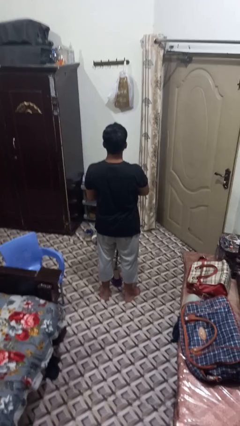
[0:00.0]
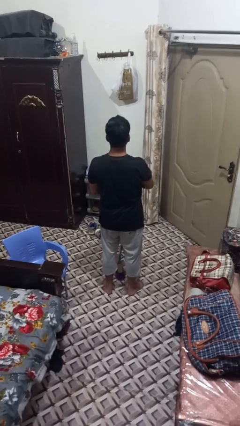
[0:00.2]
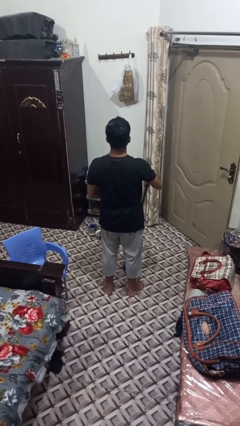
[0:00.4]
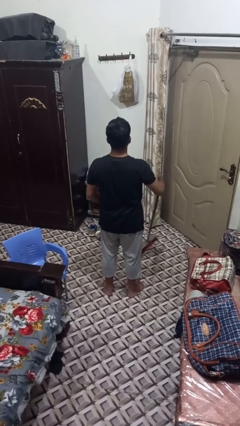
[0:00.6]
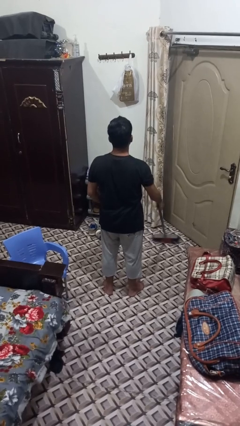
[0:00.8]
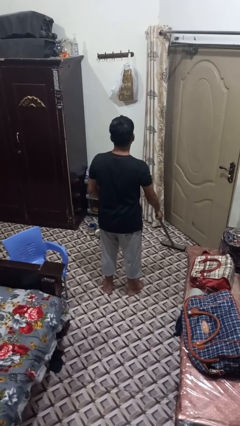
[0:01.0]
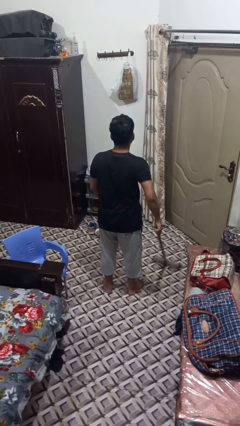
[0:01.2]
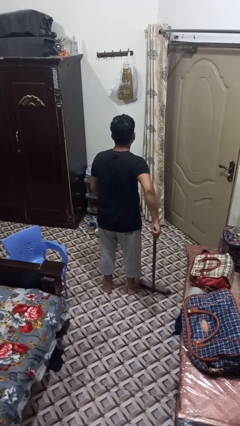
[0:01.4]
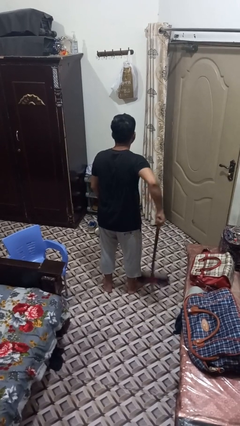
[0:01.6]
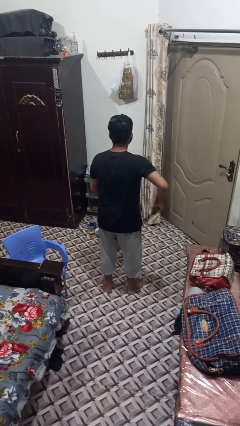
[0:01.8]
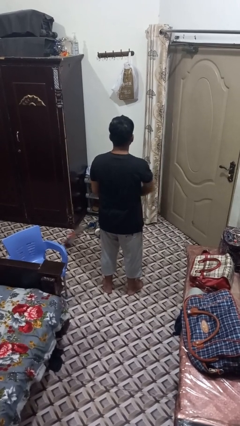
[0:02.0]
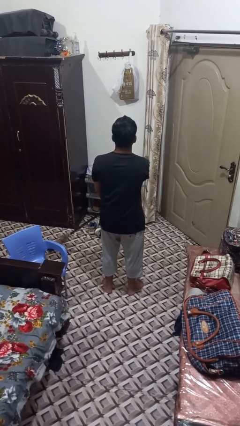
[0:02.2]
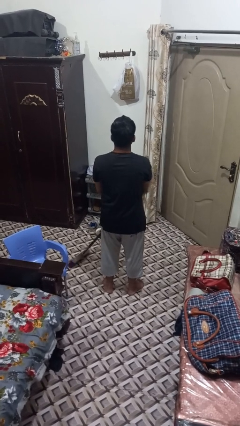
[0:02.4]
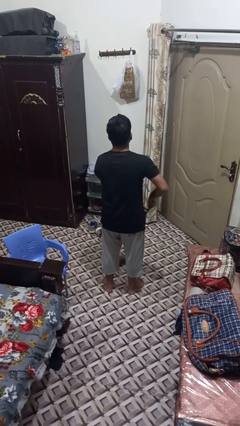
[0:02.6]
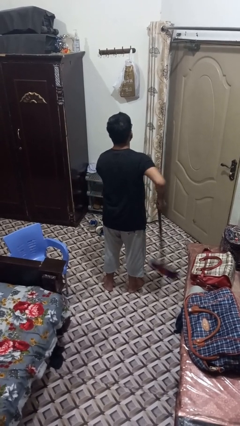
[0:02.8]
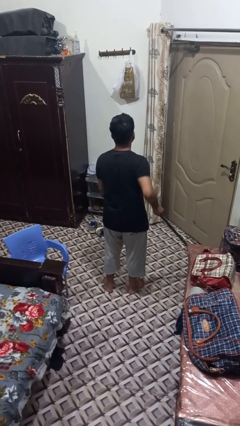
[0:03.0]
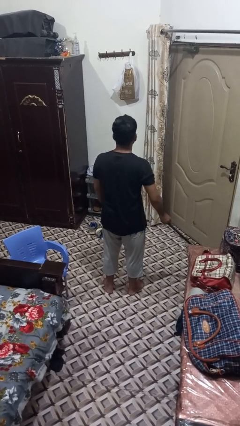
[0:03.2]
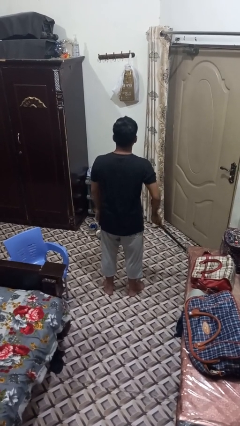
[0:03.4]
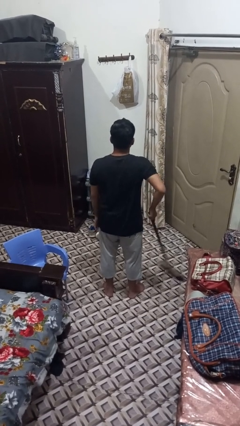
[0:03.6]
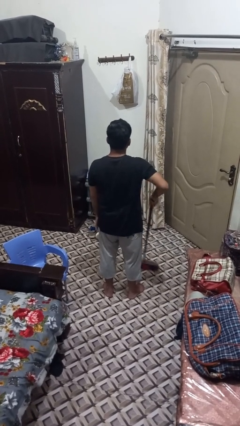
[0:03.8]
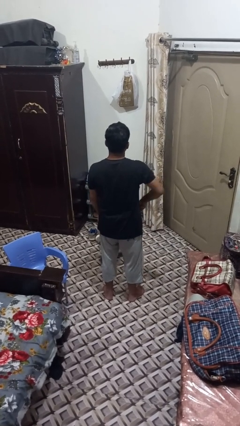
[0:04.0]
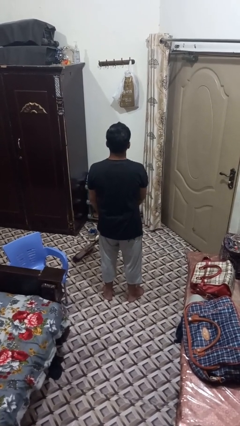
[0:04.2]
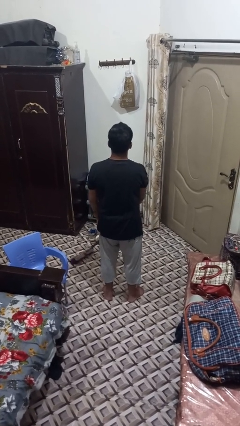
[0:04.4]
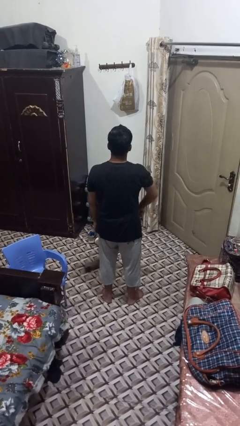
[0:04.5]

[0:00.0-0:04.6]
person sweeps floor

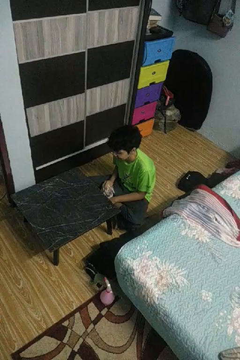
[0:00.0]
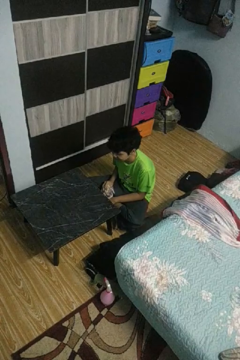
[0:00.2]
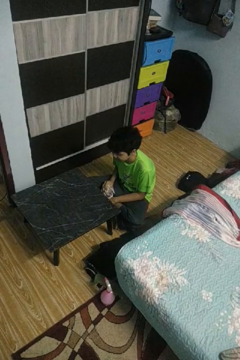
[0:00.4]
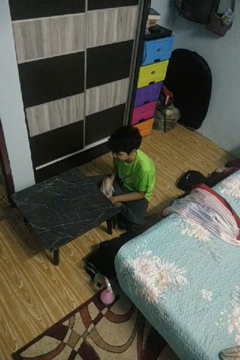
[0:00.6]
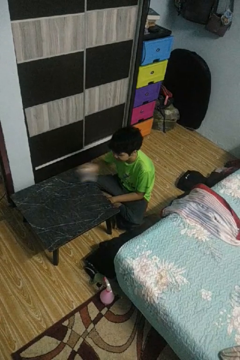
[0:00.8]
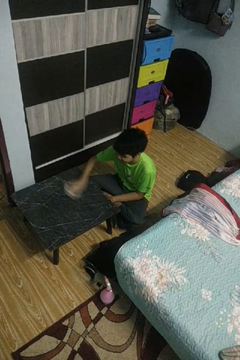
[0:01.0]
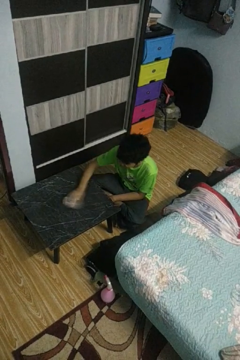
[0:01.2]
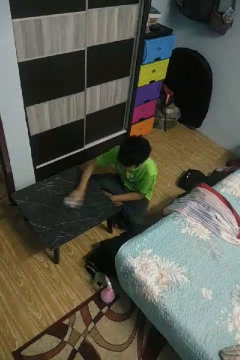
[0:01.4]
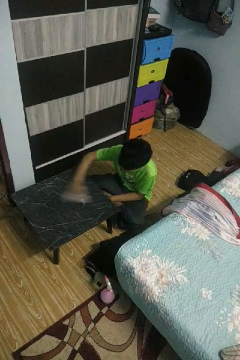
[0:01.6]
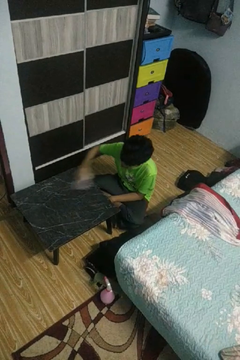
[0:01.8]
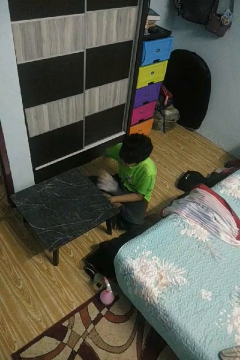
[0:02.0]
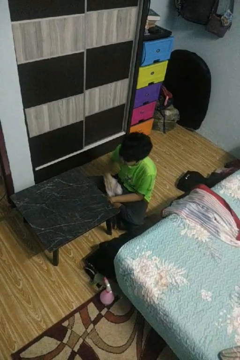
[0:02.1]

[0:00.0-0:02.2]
person cleans table with rag

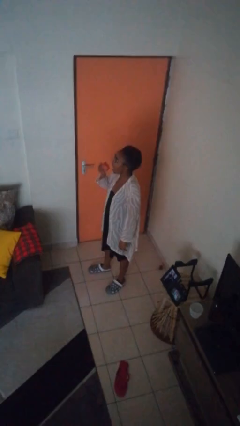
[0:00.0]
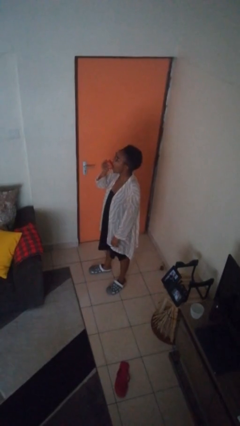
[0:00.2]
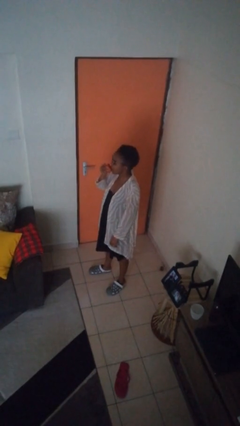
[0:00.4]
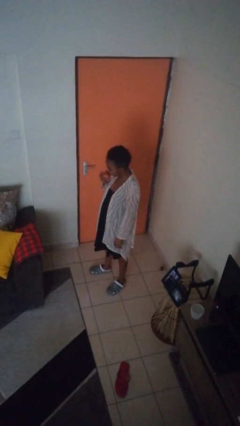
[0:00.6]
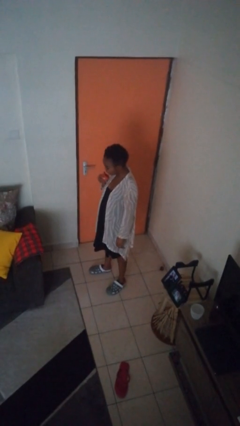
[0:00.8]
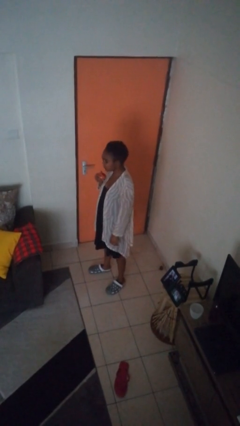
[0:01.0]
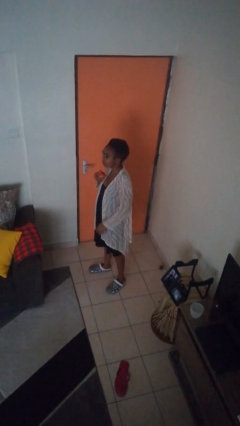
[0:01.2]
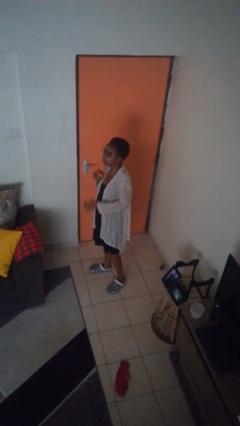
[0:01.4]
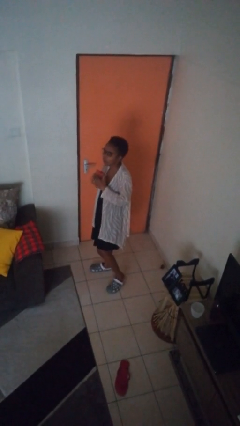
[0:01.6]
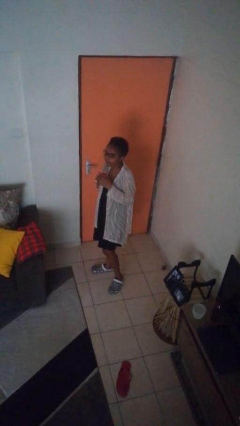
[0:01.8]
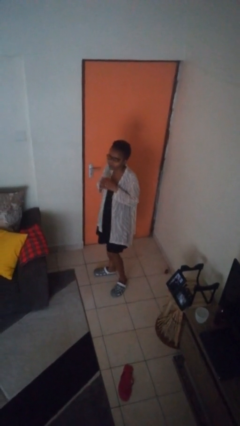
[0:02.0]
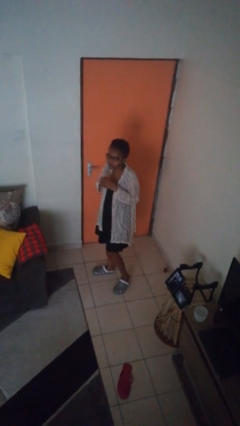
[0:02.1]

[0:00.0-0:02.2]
person eats apple

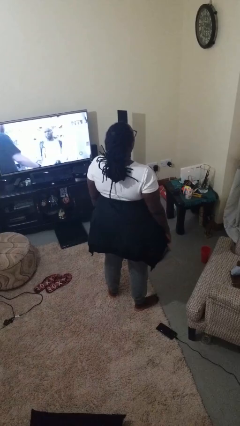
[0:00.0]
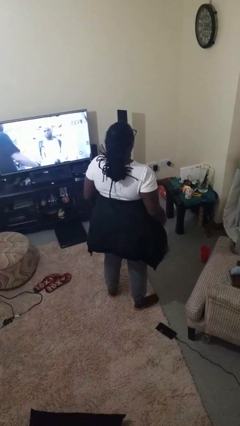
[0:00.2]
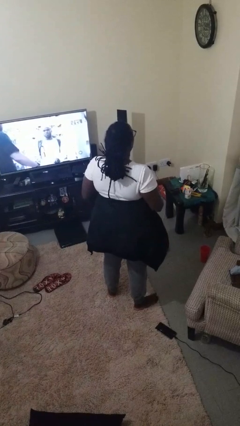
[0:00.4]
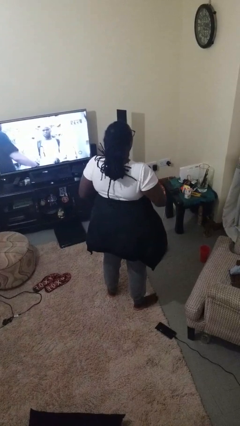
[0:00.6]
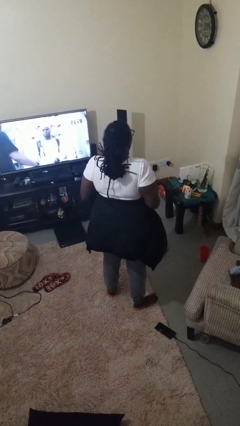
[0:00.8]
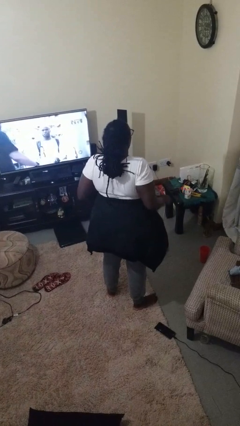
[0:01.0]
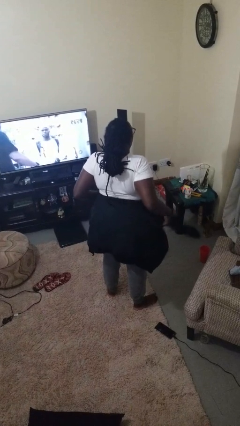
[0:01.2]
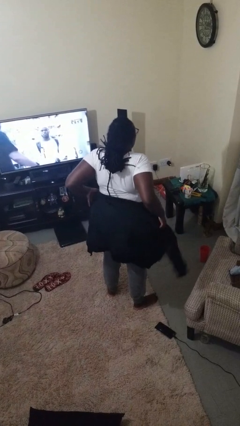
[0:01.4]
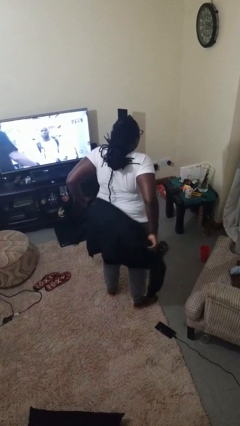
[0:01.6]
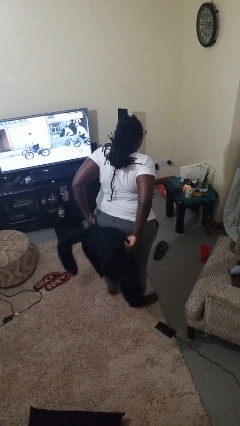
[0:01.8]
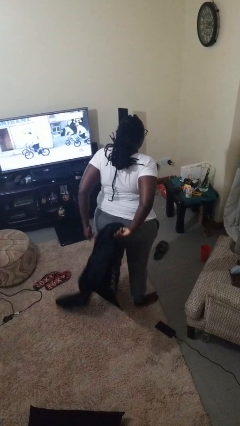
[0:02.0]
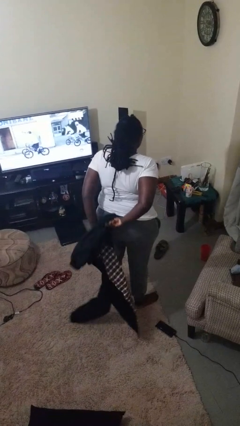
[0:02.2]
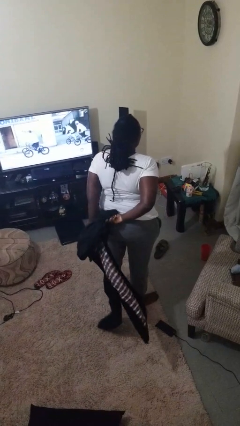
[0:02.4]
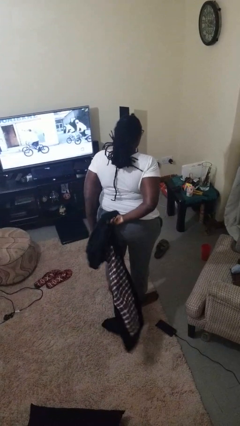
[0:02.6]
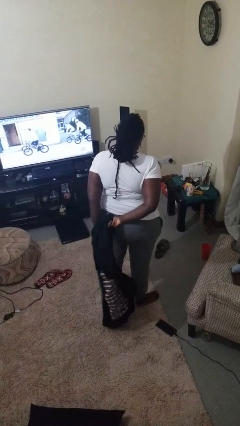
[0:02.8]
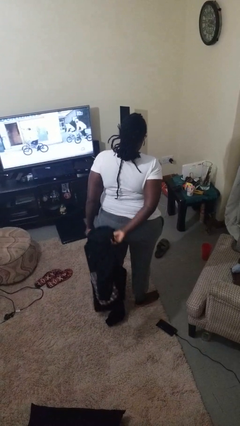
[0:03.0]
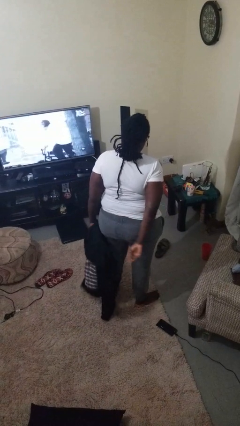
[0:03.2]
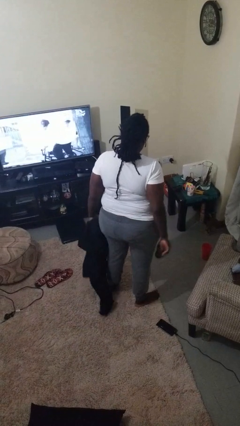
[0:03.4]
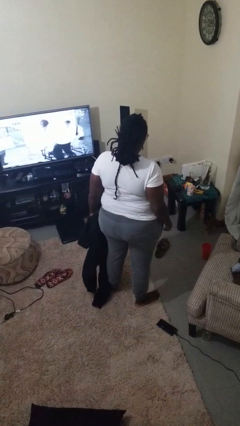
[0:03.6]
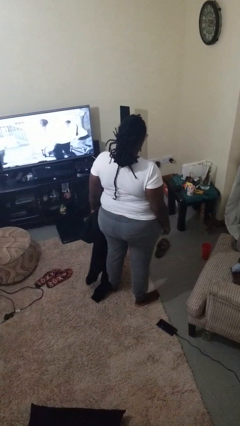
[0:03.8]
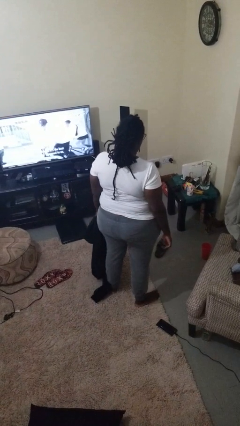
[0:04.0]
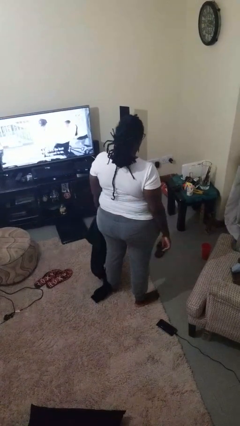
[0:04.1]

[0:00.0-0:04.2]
person unties jacket around waist

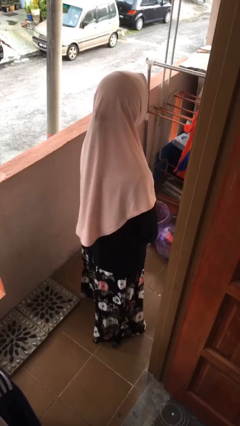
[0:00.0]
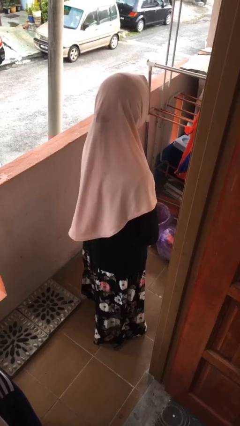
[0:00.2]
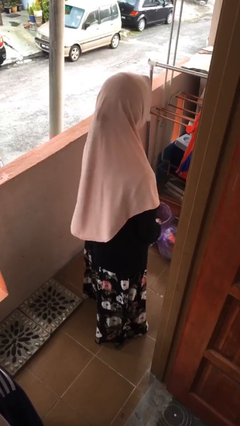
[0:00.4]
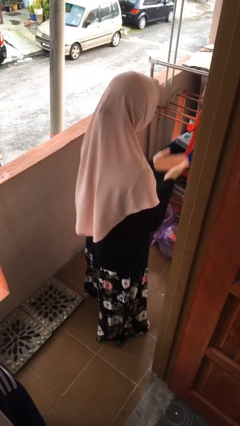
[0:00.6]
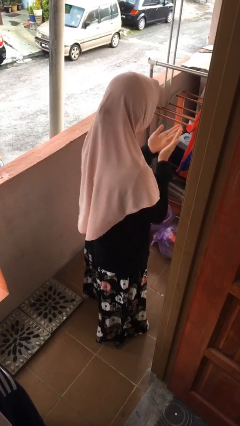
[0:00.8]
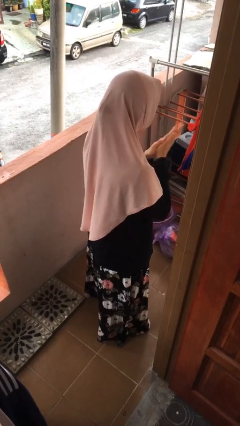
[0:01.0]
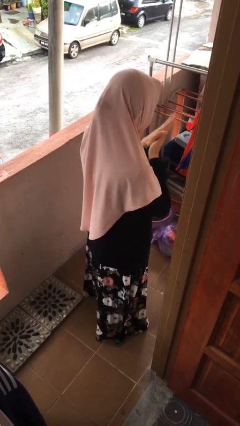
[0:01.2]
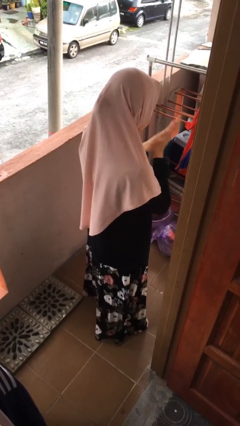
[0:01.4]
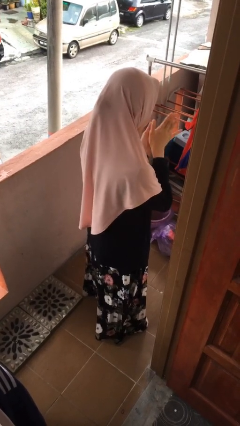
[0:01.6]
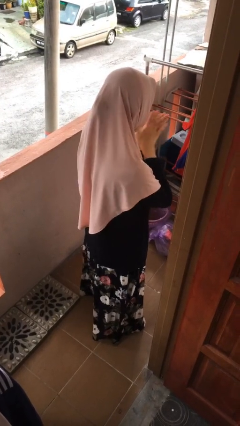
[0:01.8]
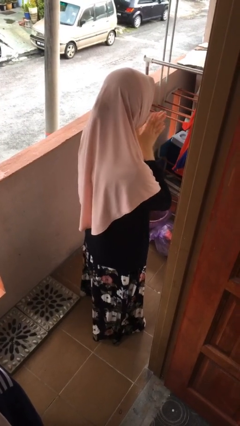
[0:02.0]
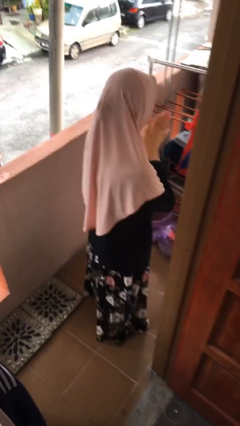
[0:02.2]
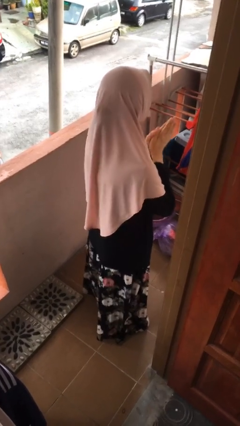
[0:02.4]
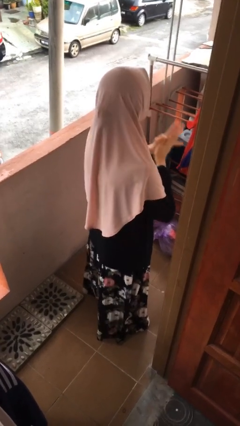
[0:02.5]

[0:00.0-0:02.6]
person blows into hands

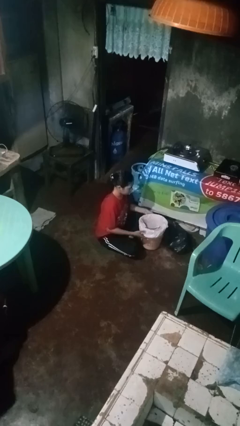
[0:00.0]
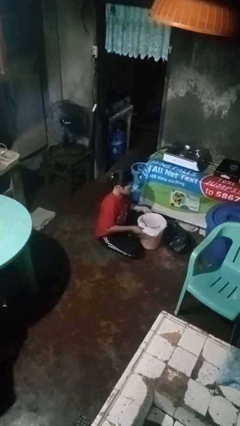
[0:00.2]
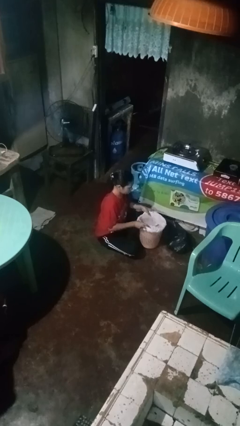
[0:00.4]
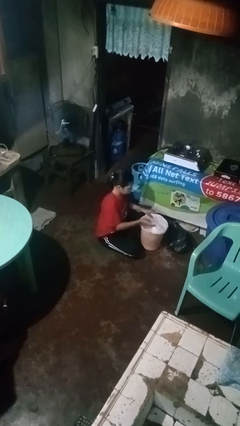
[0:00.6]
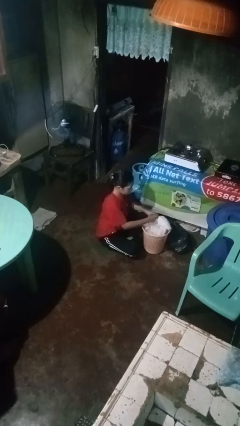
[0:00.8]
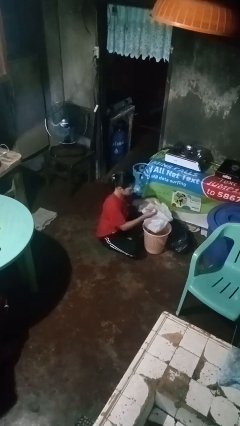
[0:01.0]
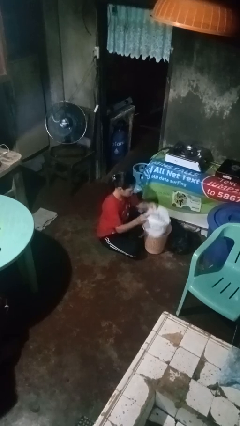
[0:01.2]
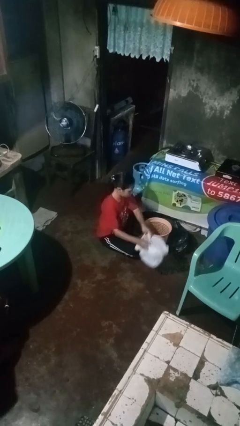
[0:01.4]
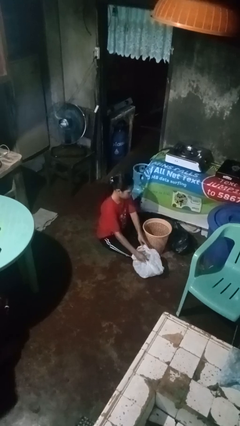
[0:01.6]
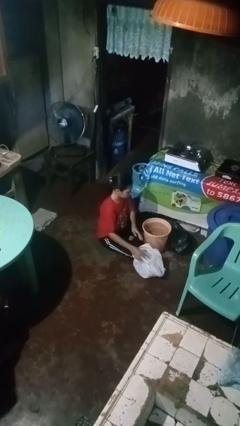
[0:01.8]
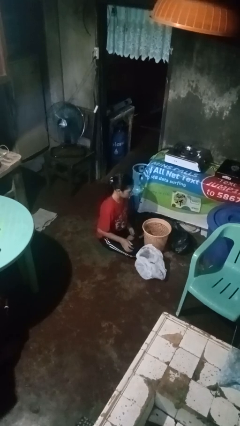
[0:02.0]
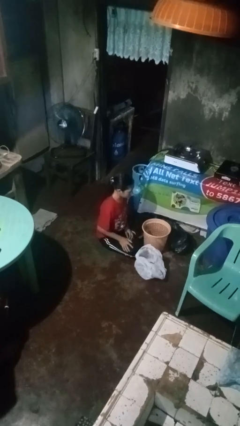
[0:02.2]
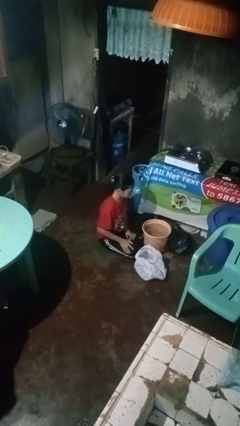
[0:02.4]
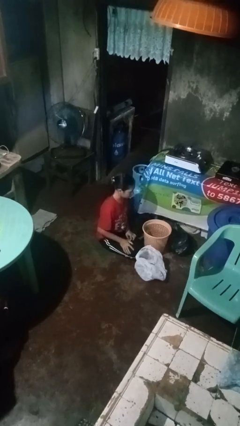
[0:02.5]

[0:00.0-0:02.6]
person removes trashbag from trashcan
